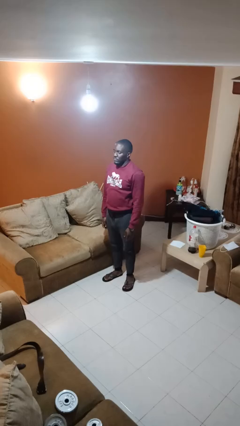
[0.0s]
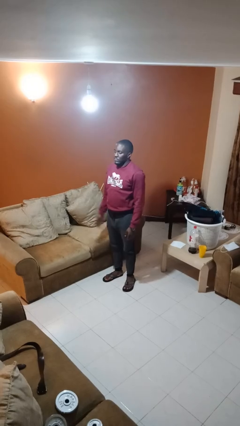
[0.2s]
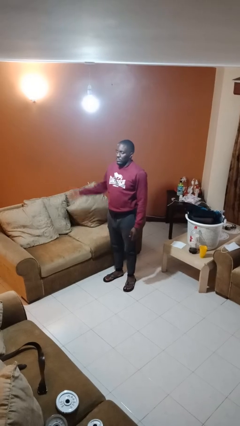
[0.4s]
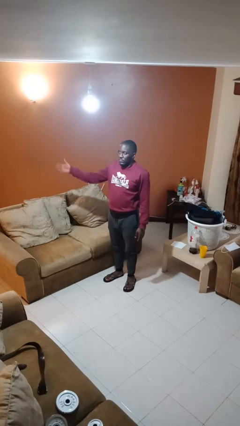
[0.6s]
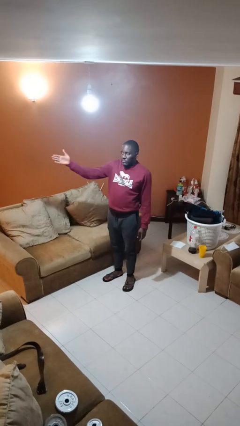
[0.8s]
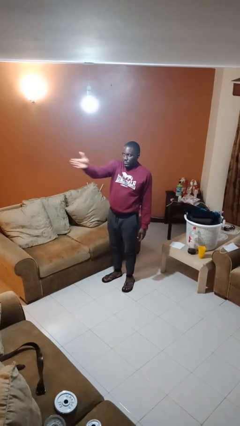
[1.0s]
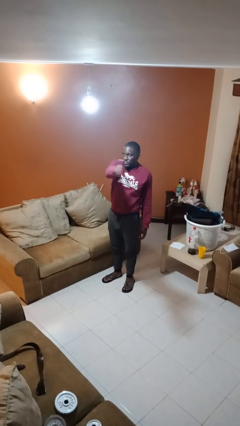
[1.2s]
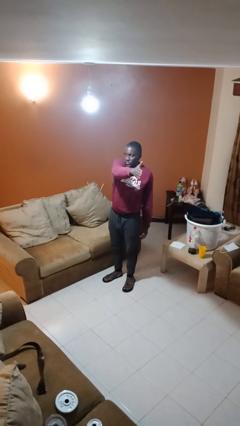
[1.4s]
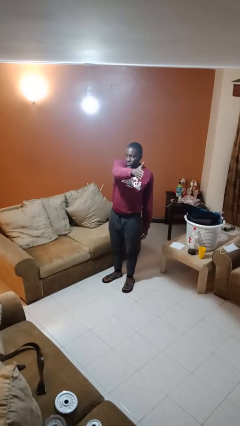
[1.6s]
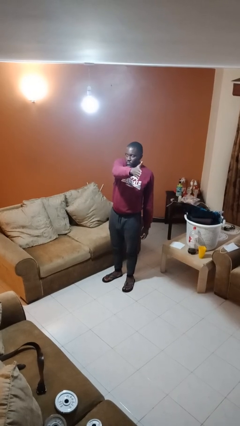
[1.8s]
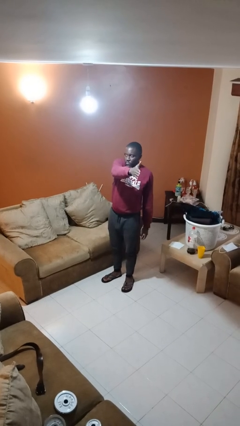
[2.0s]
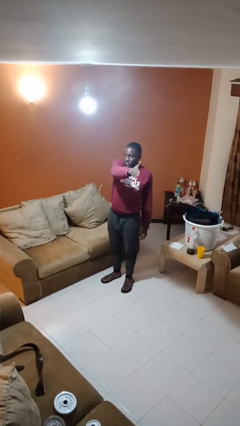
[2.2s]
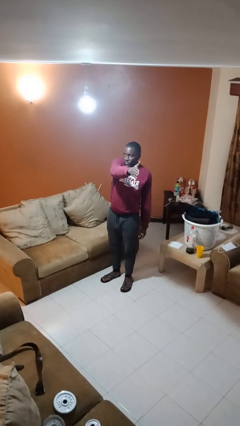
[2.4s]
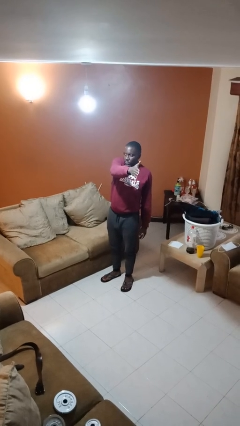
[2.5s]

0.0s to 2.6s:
person gestures swipe left

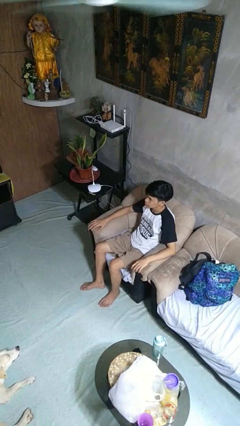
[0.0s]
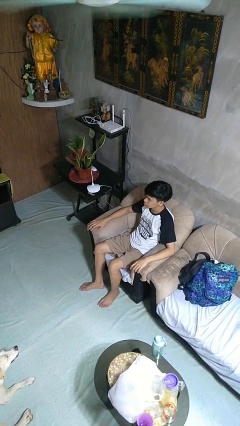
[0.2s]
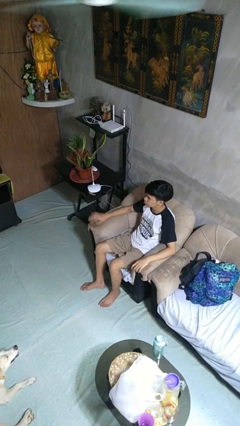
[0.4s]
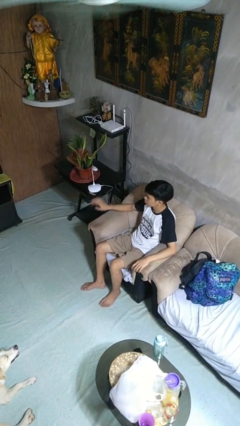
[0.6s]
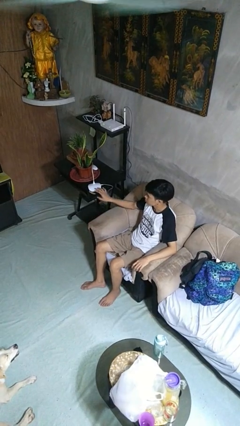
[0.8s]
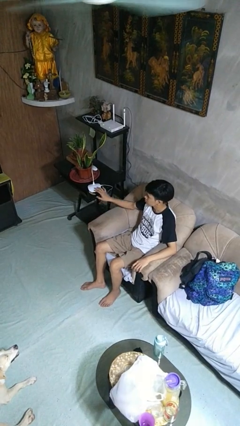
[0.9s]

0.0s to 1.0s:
person turns on lamp

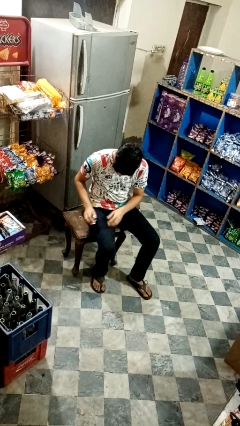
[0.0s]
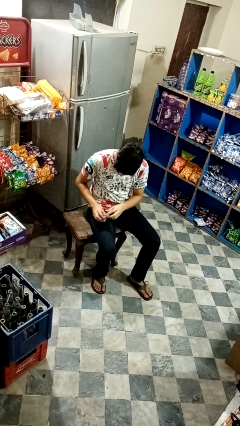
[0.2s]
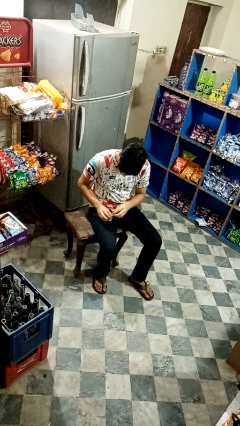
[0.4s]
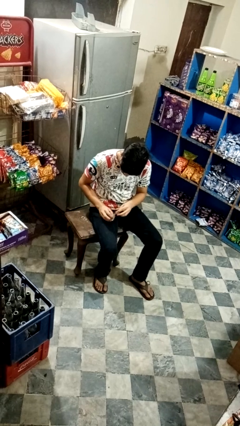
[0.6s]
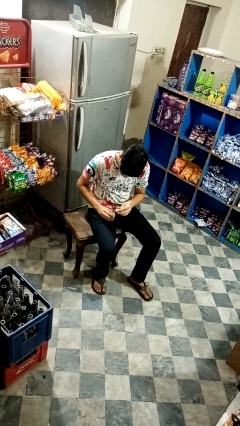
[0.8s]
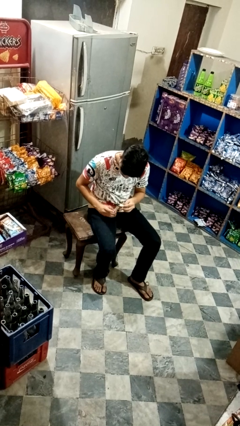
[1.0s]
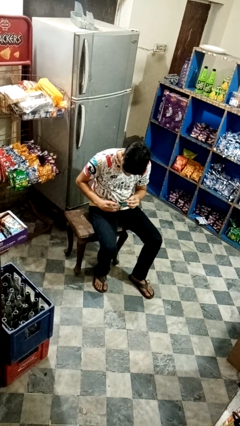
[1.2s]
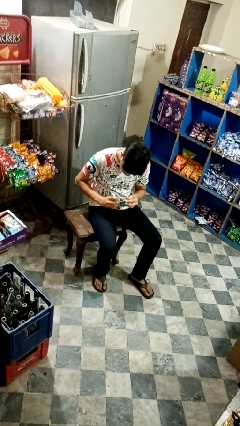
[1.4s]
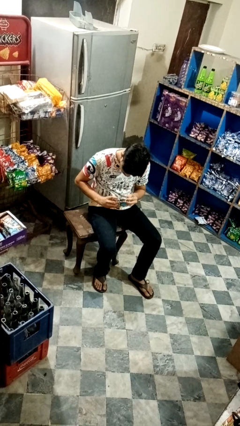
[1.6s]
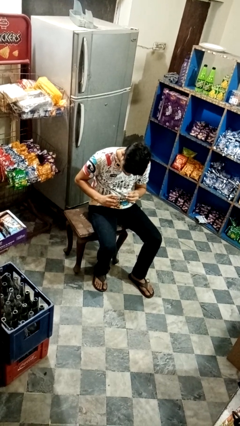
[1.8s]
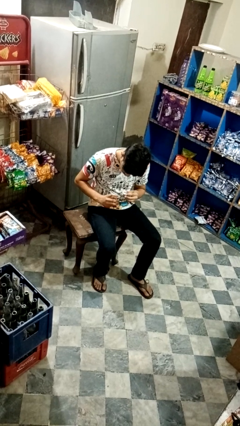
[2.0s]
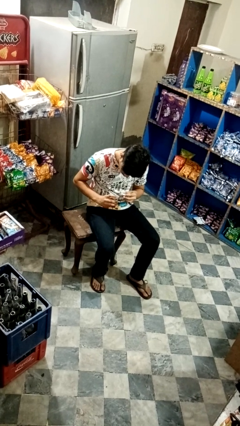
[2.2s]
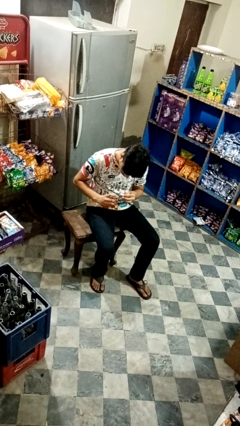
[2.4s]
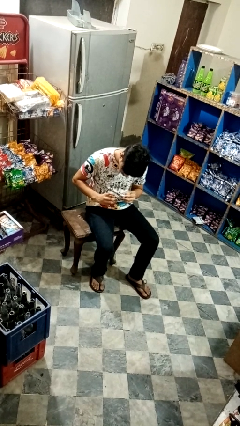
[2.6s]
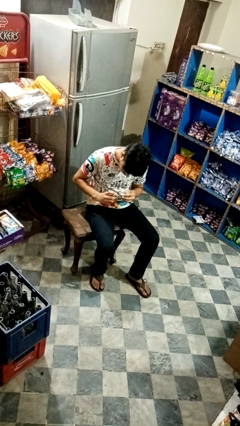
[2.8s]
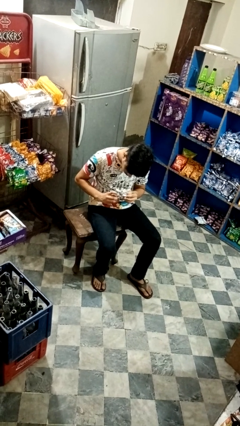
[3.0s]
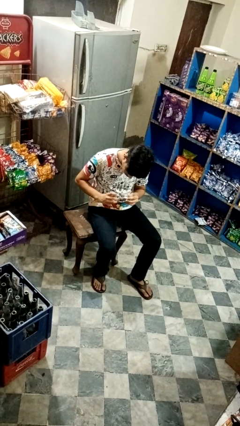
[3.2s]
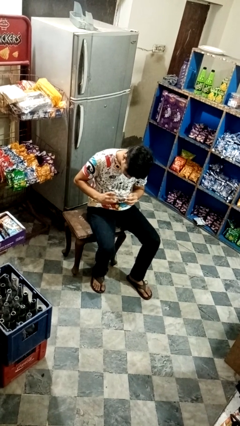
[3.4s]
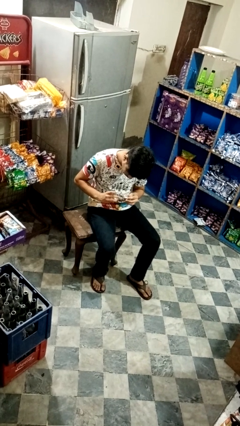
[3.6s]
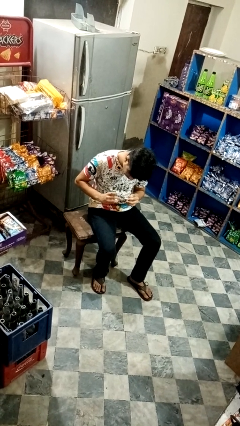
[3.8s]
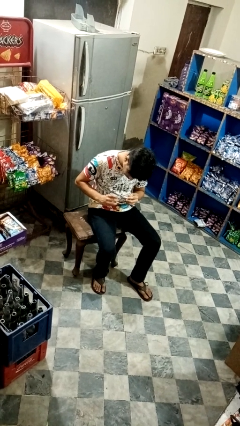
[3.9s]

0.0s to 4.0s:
person paints fingernails

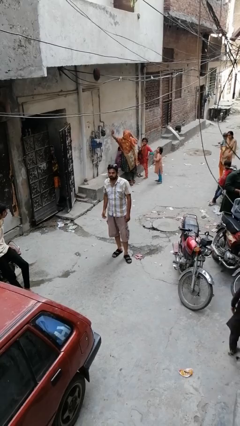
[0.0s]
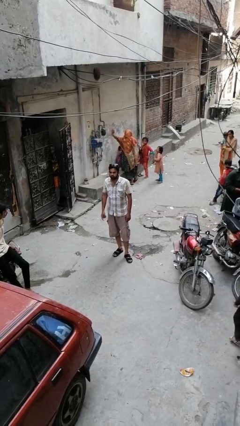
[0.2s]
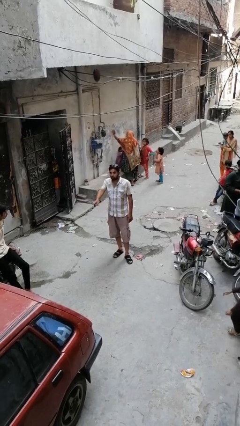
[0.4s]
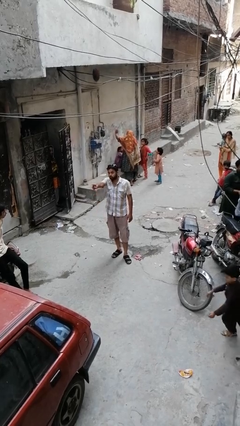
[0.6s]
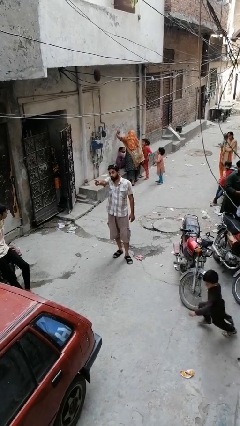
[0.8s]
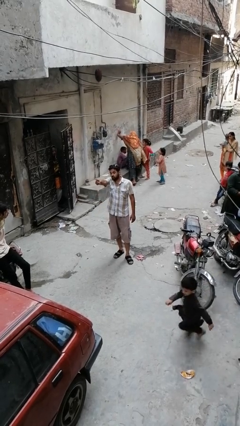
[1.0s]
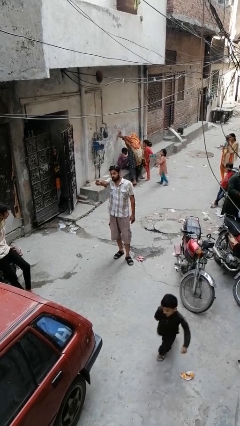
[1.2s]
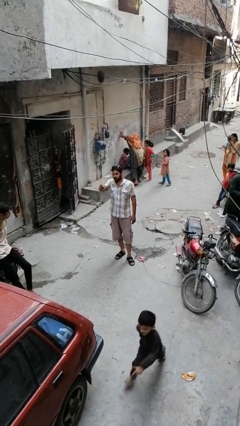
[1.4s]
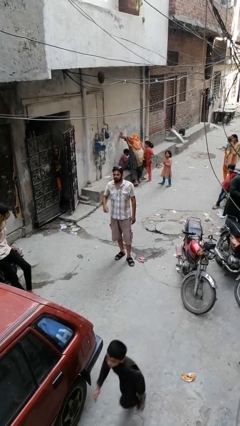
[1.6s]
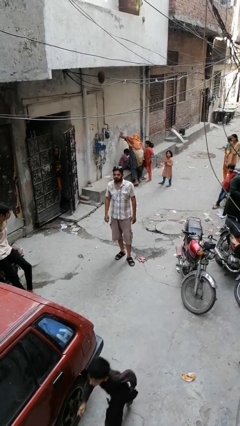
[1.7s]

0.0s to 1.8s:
person points at person

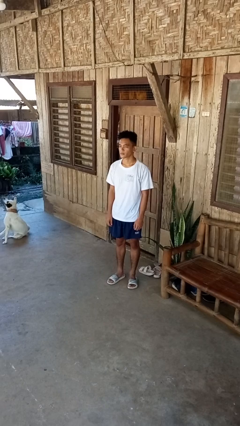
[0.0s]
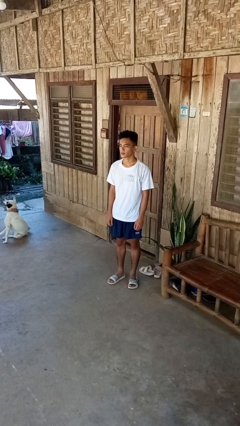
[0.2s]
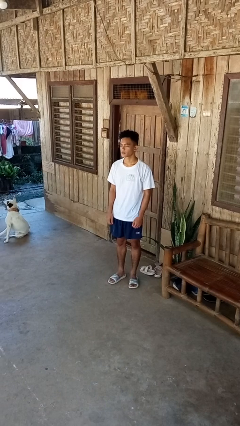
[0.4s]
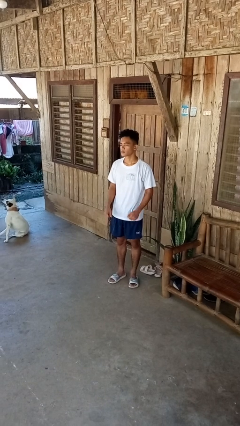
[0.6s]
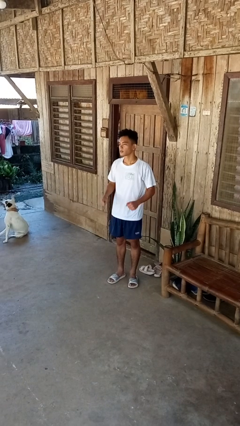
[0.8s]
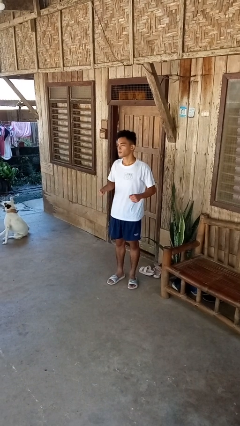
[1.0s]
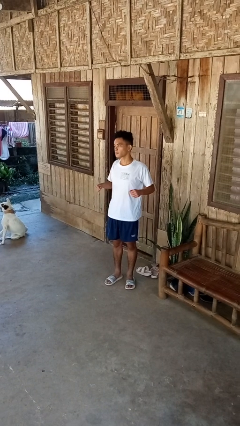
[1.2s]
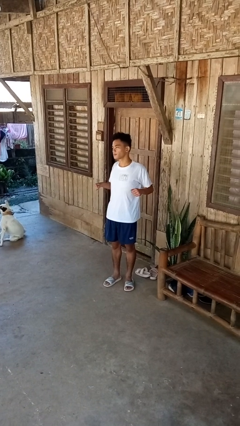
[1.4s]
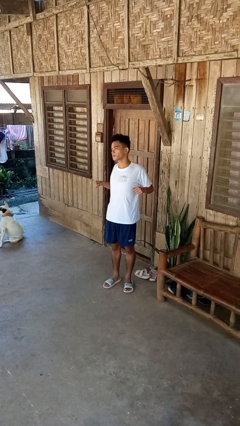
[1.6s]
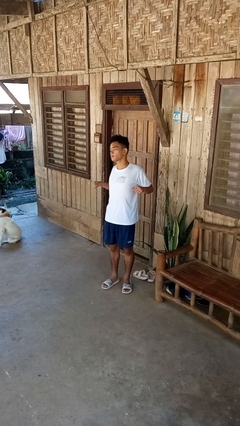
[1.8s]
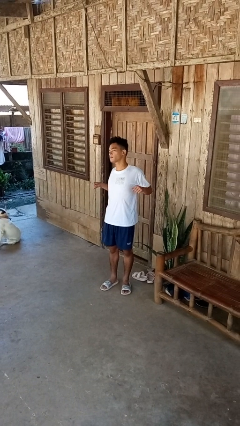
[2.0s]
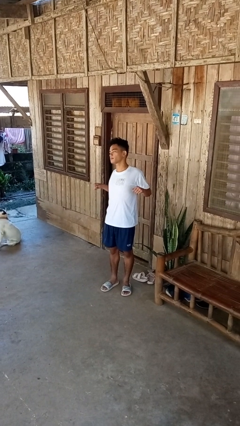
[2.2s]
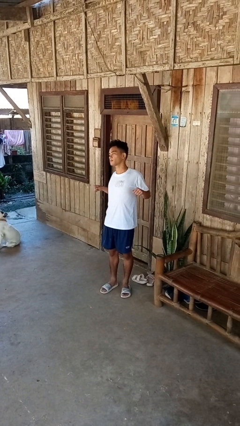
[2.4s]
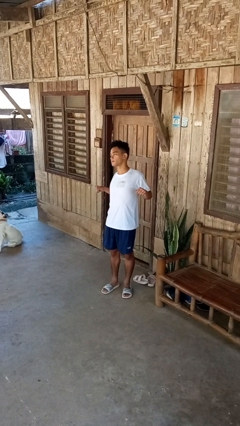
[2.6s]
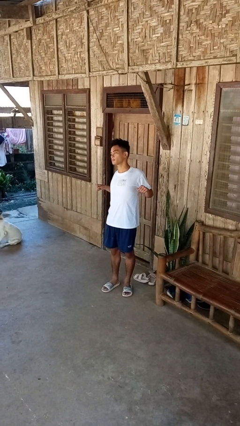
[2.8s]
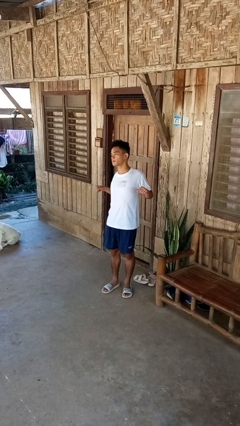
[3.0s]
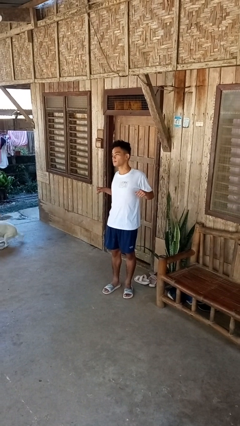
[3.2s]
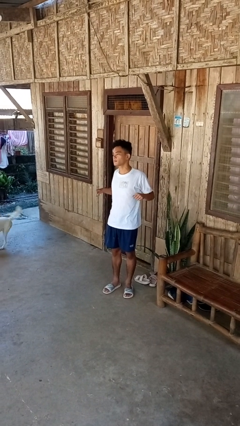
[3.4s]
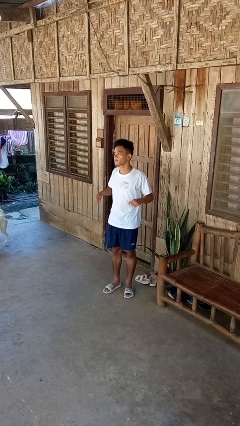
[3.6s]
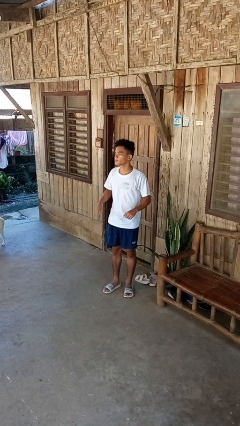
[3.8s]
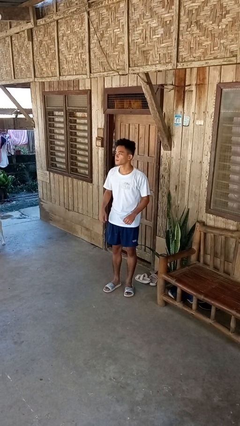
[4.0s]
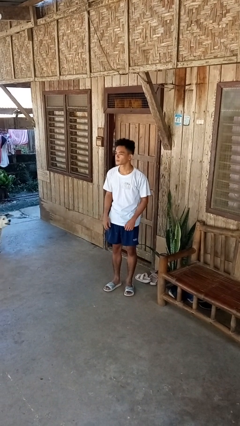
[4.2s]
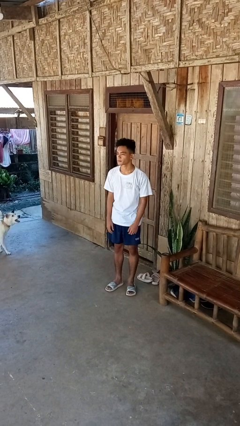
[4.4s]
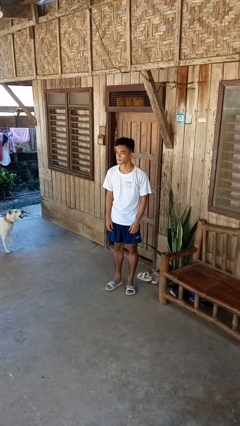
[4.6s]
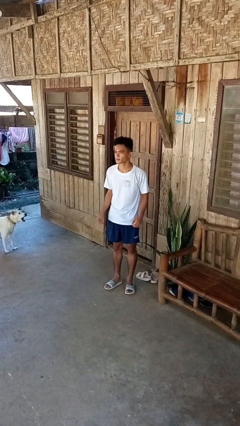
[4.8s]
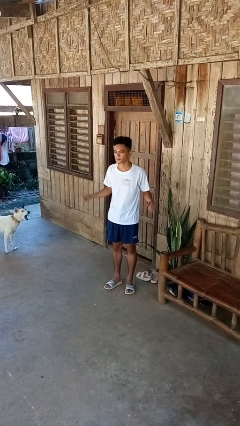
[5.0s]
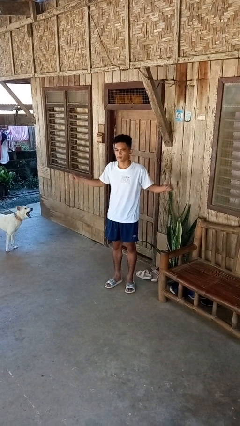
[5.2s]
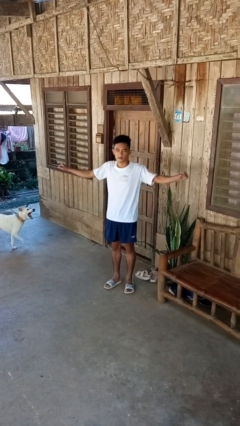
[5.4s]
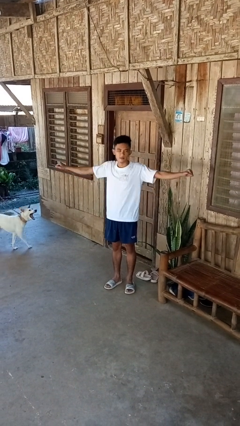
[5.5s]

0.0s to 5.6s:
person stretches back

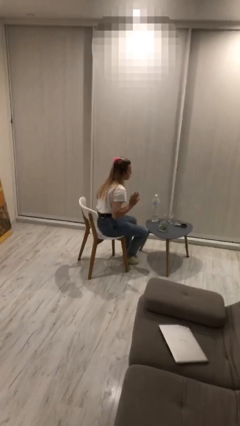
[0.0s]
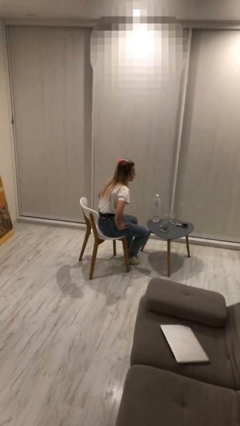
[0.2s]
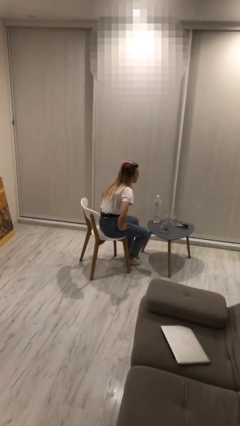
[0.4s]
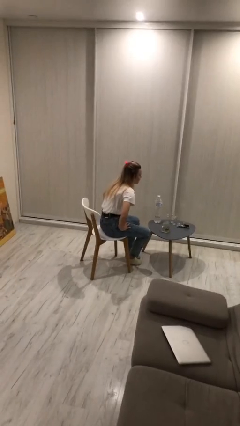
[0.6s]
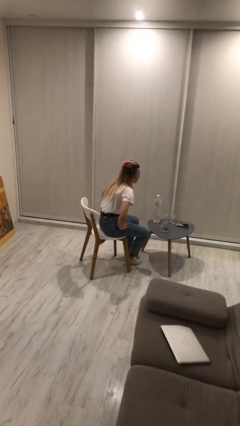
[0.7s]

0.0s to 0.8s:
person slaps hands on thighs

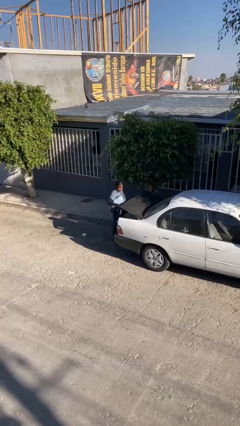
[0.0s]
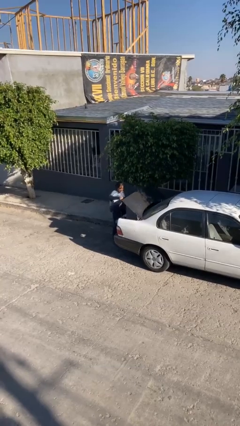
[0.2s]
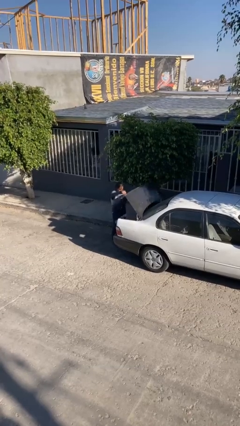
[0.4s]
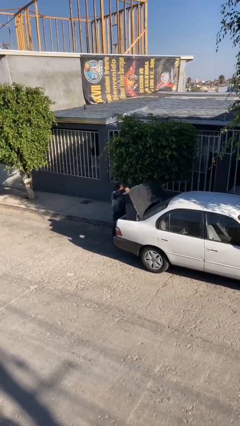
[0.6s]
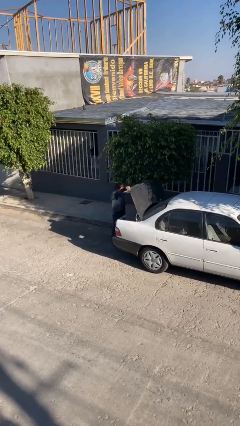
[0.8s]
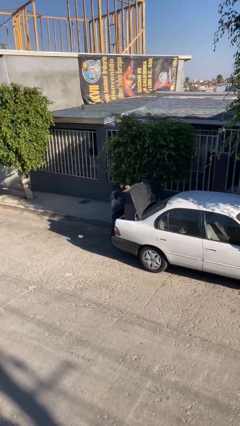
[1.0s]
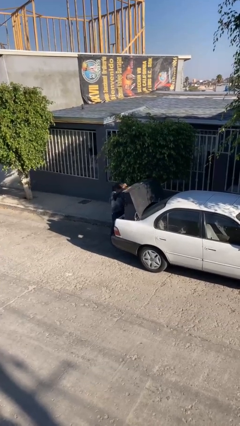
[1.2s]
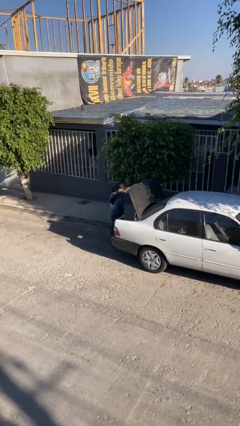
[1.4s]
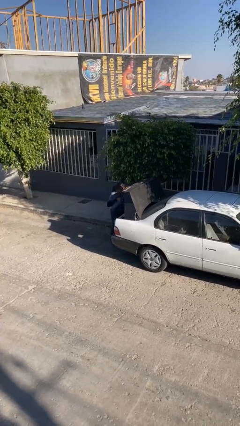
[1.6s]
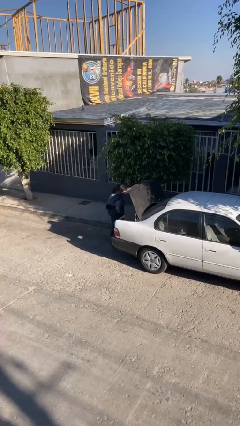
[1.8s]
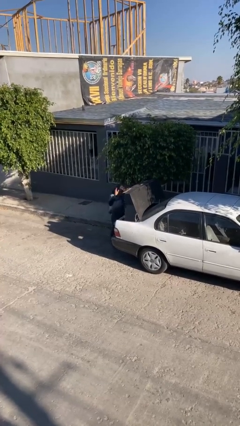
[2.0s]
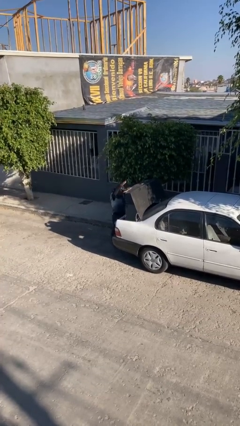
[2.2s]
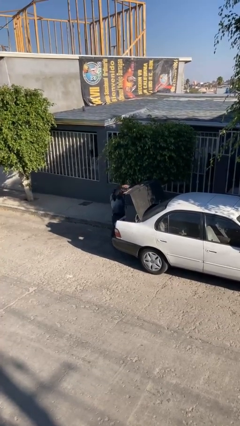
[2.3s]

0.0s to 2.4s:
person opens car trunk
